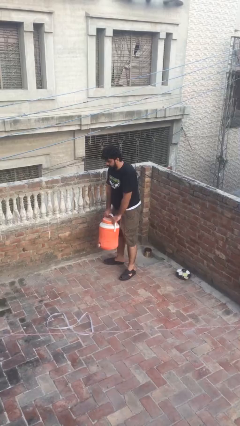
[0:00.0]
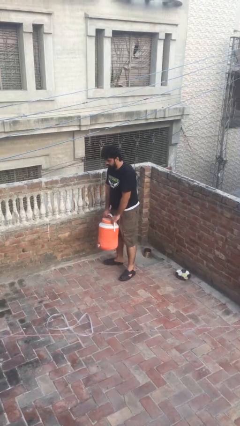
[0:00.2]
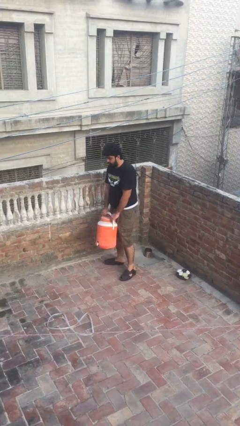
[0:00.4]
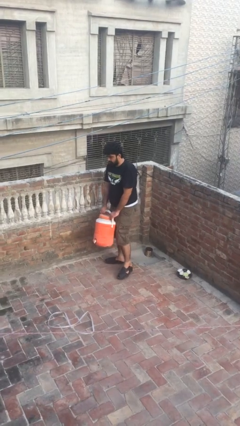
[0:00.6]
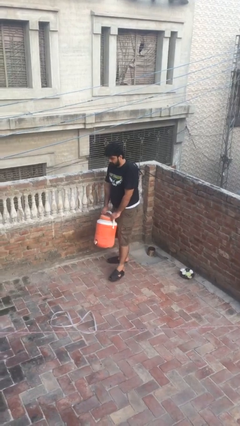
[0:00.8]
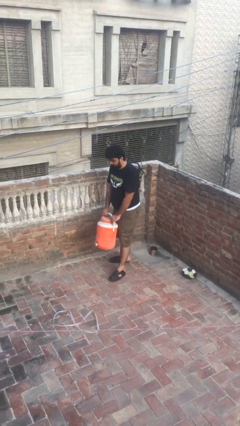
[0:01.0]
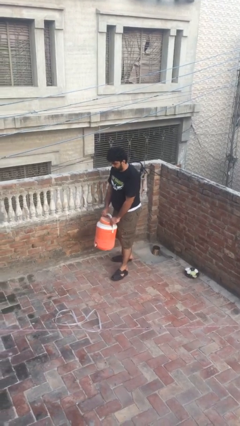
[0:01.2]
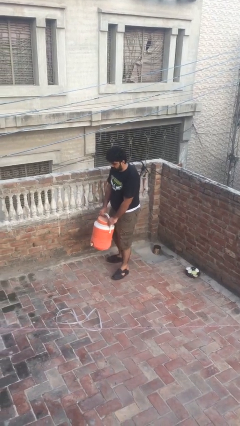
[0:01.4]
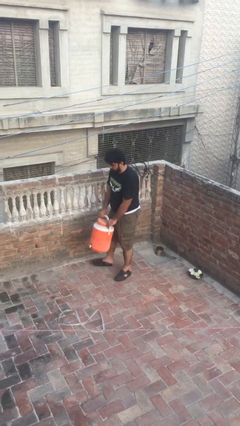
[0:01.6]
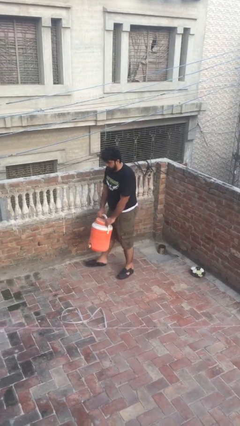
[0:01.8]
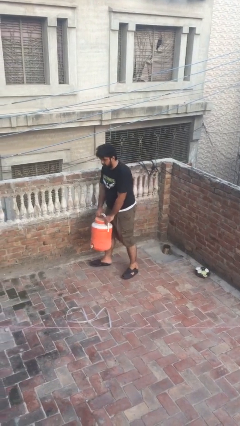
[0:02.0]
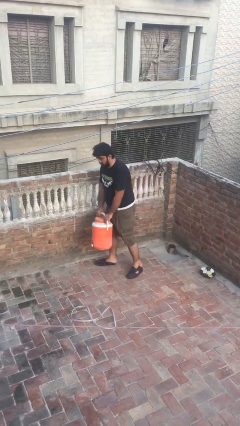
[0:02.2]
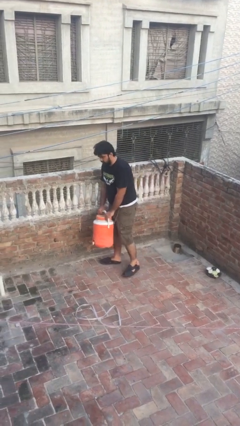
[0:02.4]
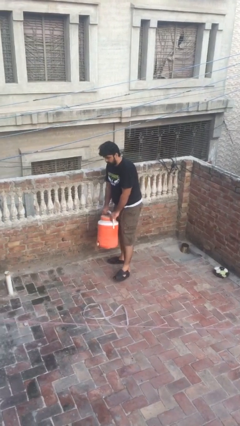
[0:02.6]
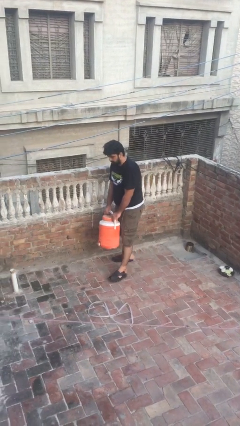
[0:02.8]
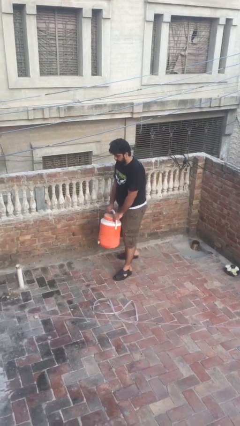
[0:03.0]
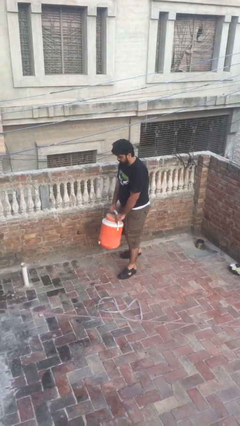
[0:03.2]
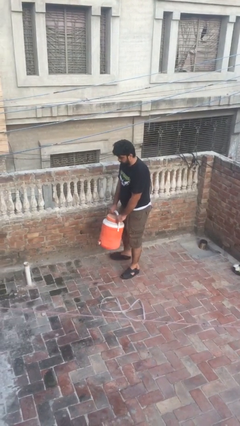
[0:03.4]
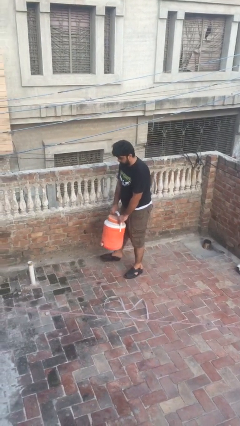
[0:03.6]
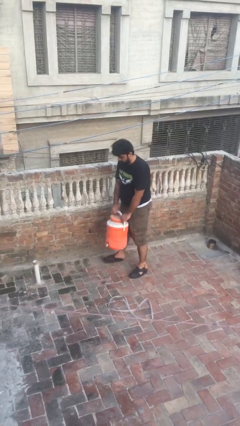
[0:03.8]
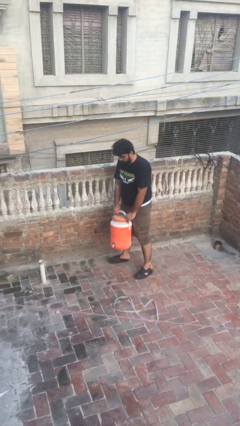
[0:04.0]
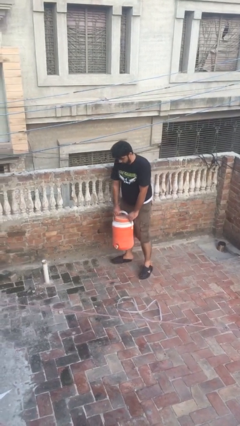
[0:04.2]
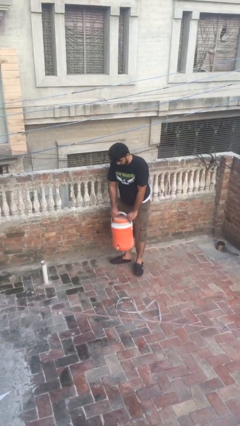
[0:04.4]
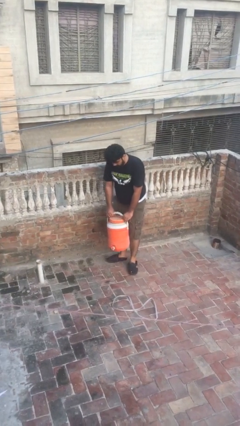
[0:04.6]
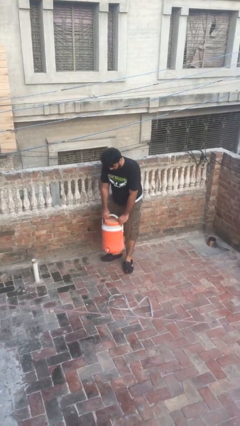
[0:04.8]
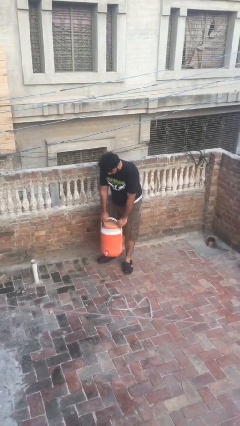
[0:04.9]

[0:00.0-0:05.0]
person carries heavy object

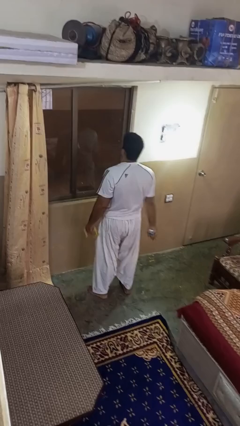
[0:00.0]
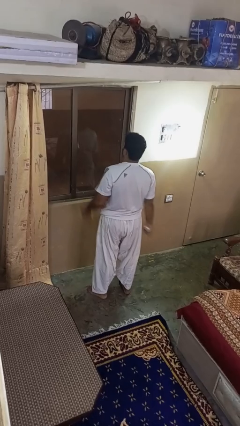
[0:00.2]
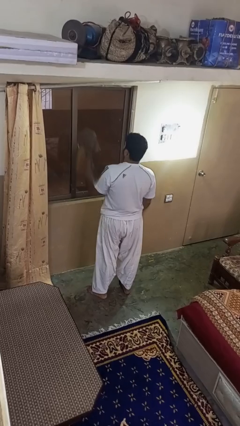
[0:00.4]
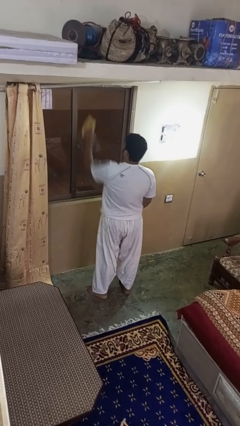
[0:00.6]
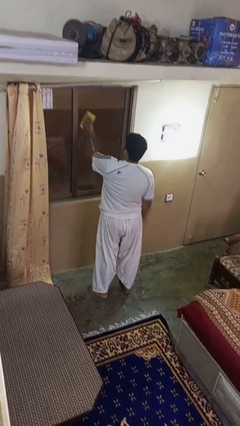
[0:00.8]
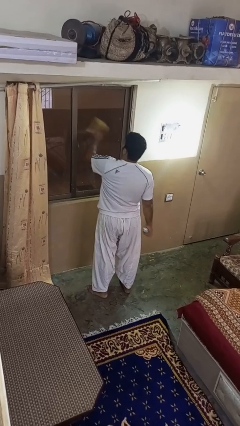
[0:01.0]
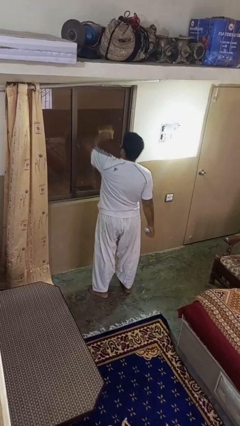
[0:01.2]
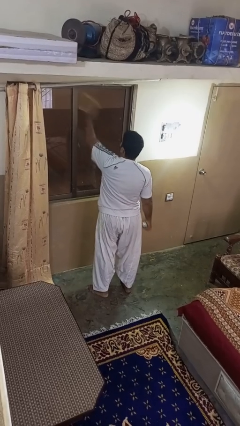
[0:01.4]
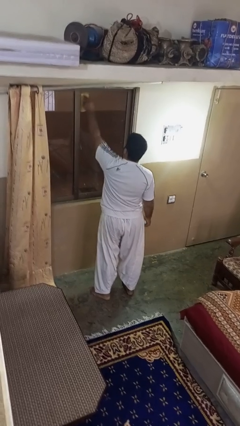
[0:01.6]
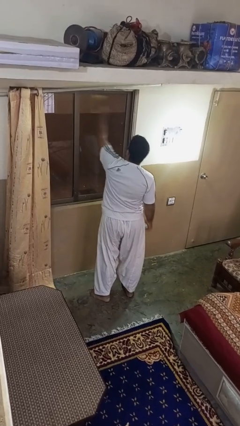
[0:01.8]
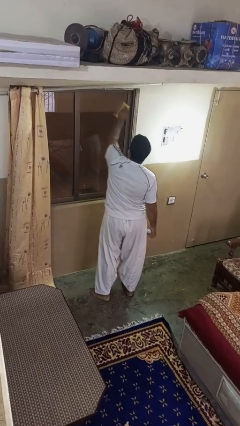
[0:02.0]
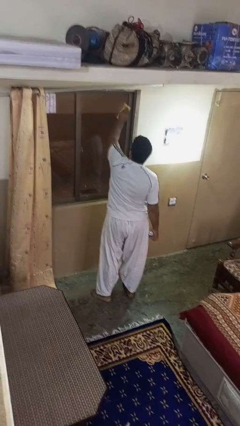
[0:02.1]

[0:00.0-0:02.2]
person washes window

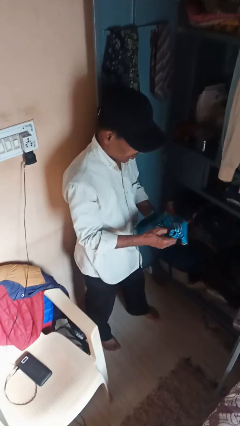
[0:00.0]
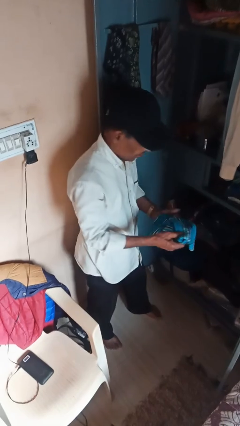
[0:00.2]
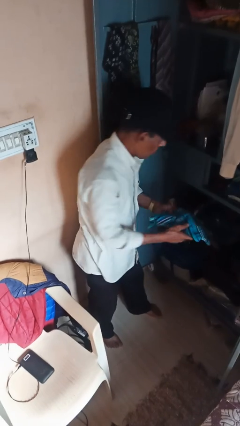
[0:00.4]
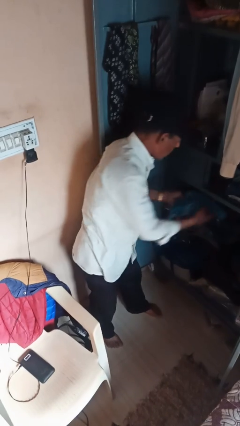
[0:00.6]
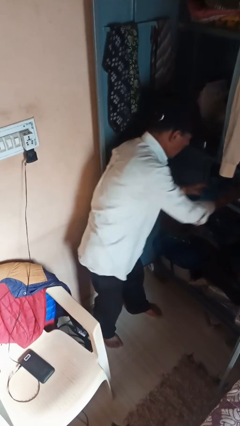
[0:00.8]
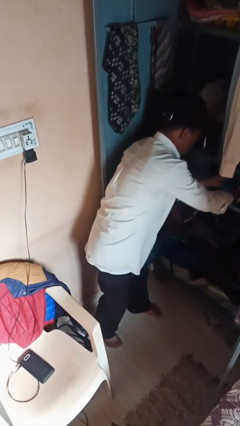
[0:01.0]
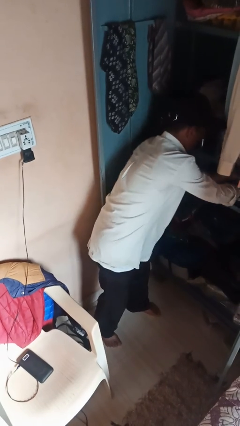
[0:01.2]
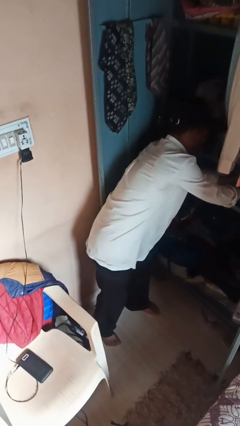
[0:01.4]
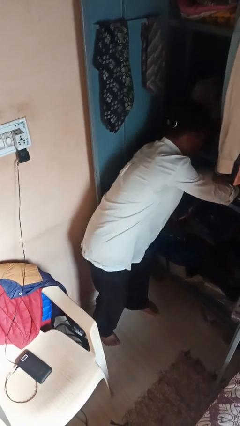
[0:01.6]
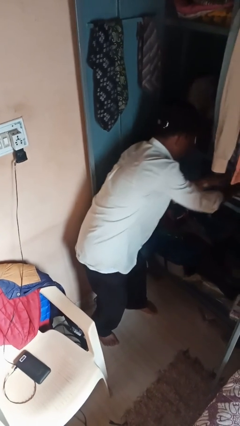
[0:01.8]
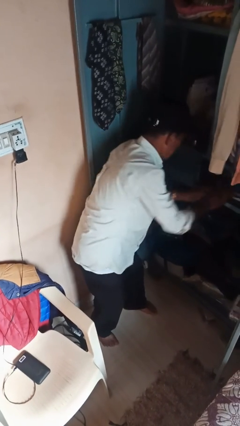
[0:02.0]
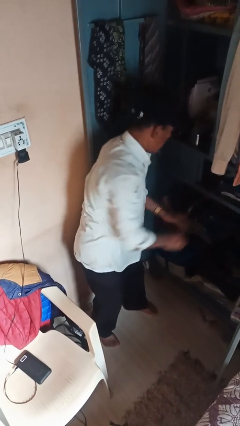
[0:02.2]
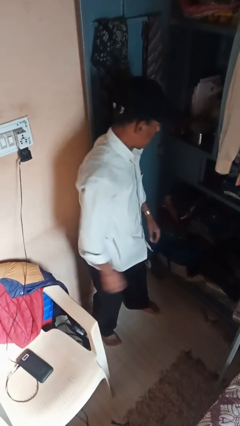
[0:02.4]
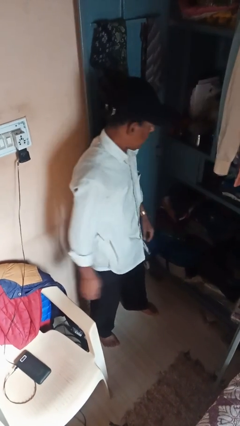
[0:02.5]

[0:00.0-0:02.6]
person puts clothes into dresser

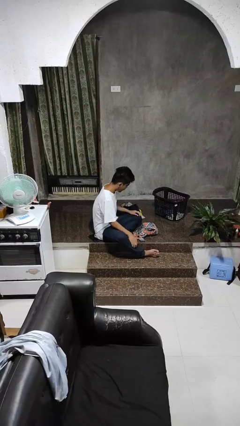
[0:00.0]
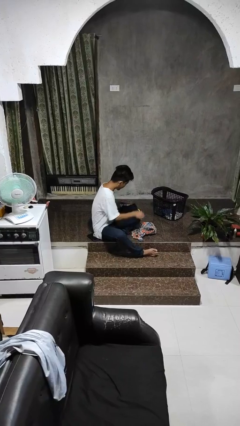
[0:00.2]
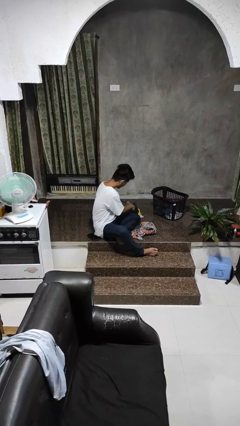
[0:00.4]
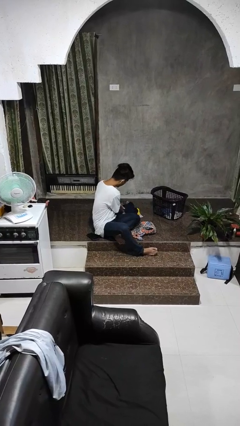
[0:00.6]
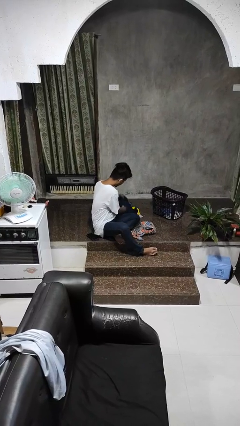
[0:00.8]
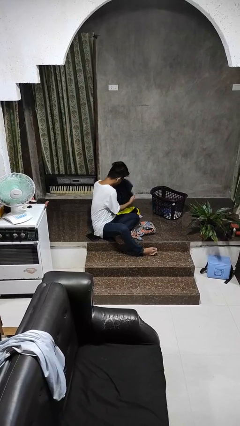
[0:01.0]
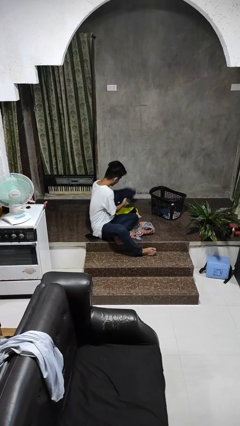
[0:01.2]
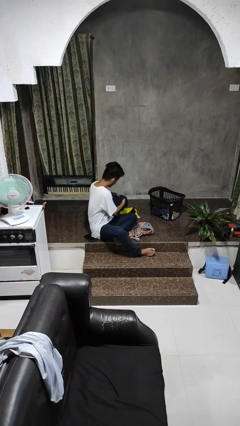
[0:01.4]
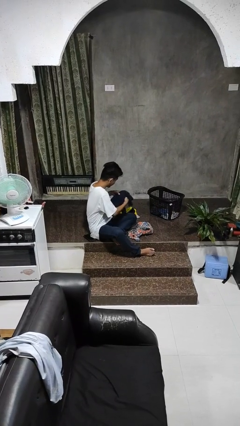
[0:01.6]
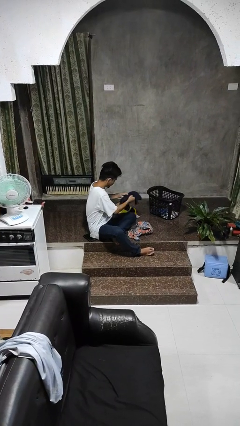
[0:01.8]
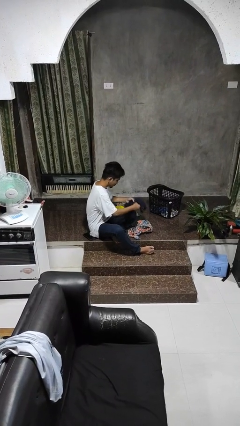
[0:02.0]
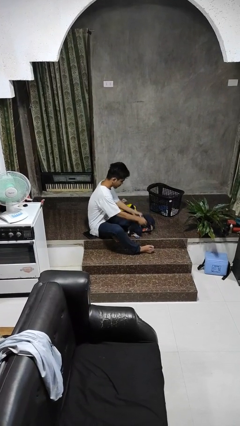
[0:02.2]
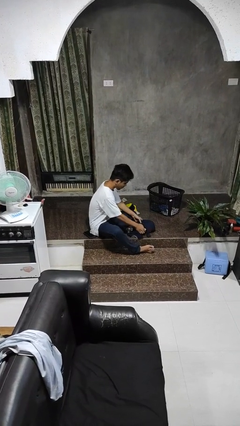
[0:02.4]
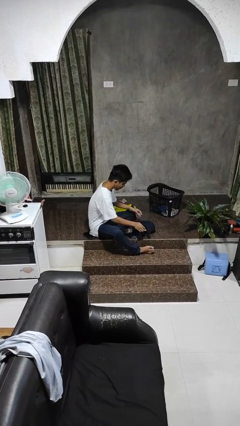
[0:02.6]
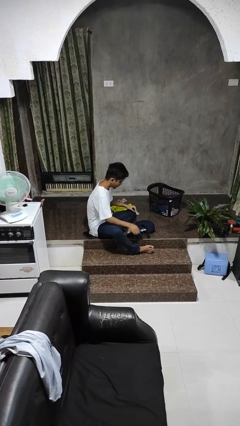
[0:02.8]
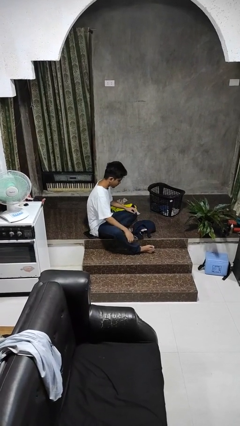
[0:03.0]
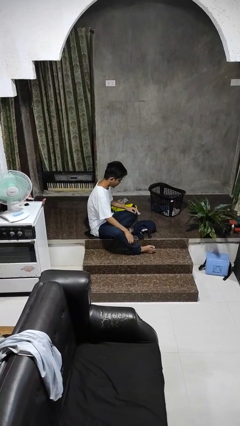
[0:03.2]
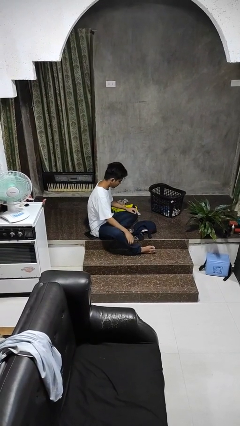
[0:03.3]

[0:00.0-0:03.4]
person folds shirt

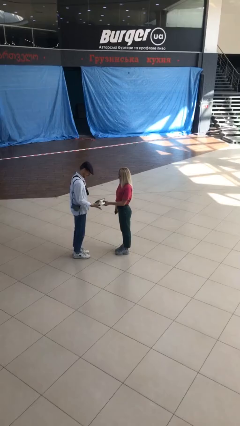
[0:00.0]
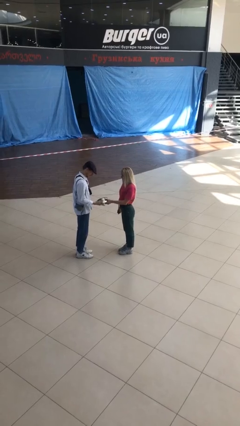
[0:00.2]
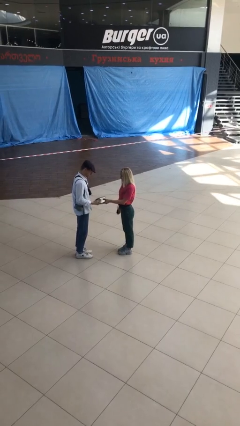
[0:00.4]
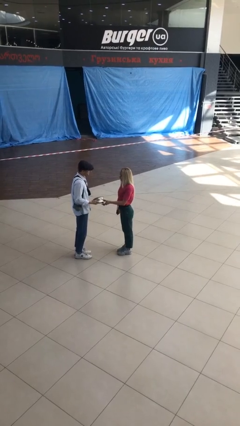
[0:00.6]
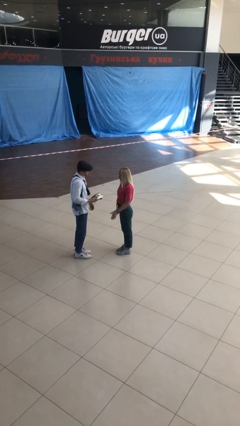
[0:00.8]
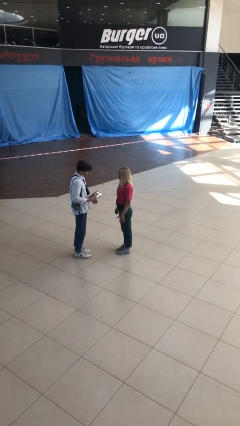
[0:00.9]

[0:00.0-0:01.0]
person transfers object to person

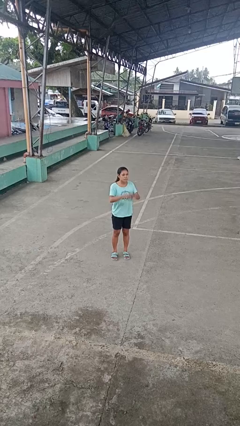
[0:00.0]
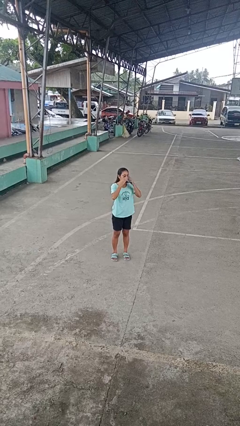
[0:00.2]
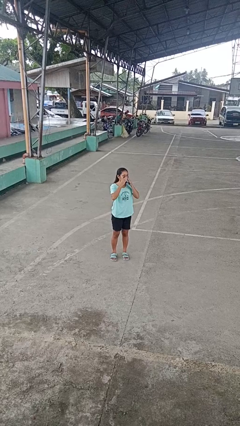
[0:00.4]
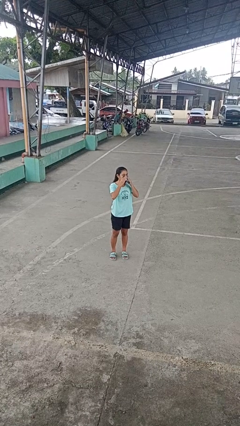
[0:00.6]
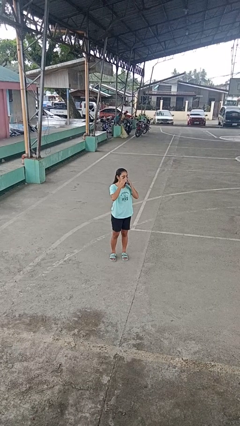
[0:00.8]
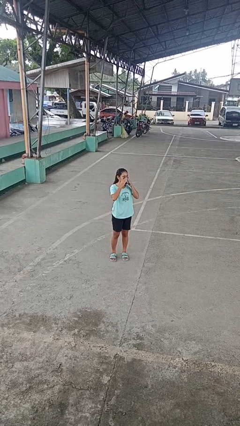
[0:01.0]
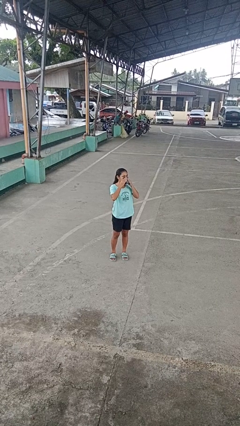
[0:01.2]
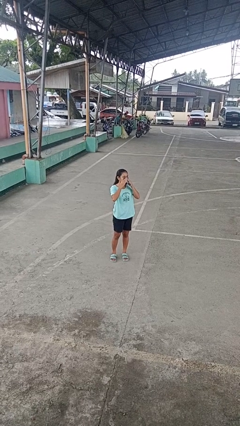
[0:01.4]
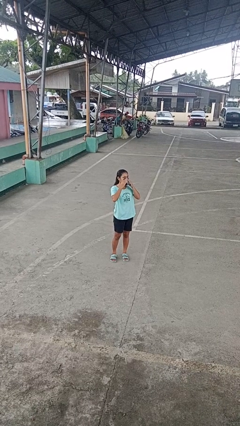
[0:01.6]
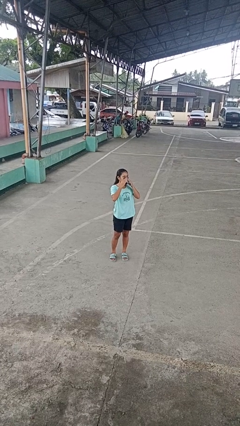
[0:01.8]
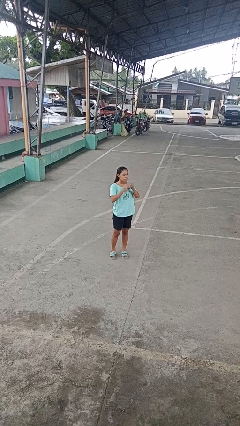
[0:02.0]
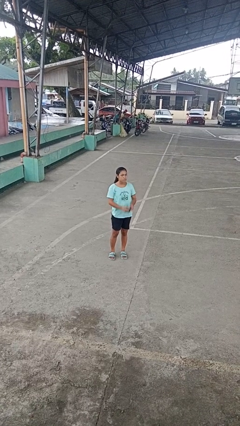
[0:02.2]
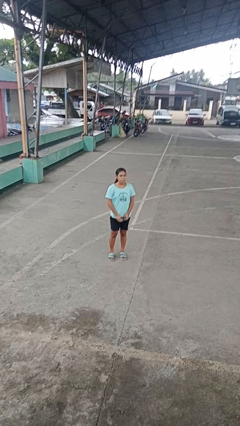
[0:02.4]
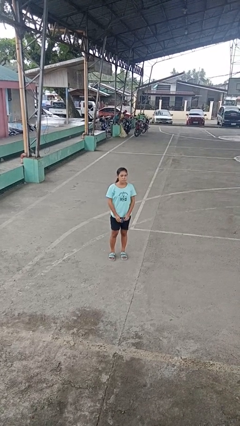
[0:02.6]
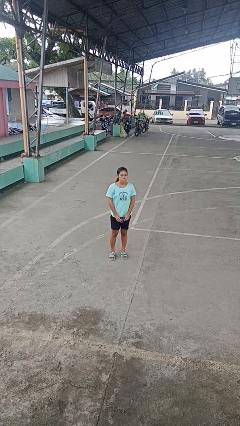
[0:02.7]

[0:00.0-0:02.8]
person blows nose

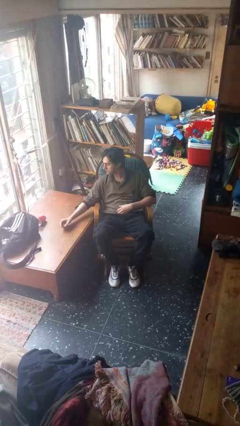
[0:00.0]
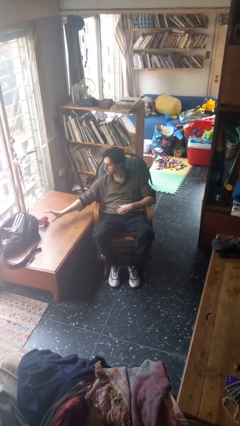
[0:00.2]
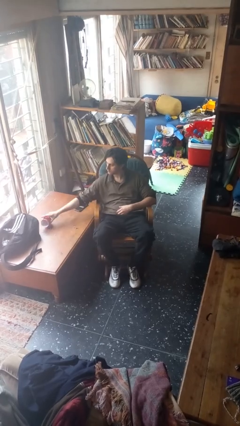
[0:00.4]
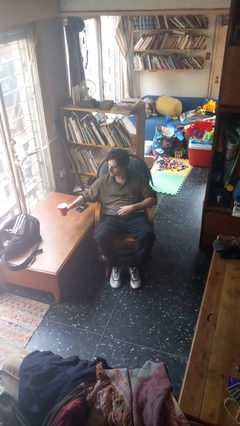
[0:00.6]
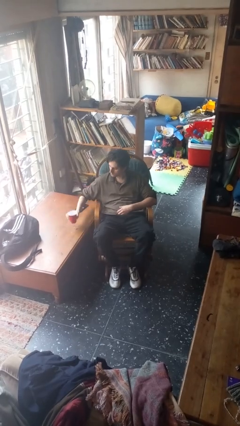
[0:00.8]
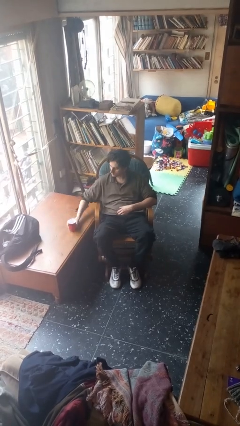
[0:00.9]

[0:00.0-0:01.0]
person sets upright glass
